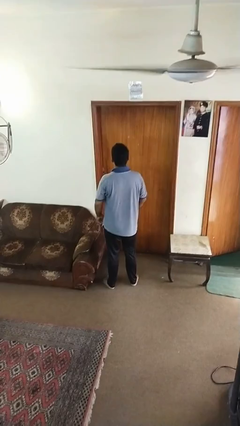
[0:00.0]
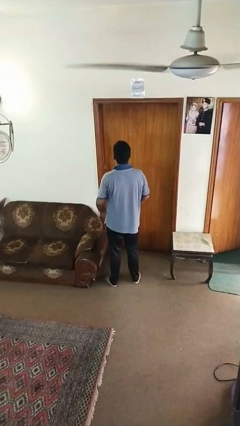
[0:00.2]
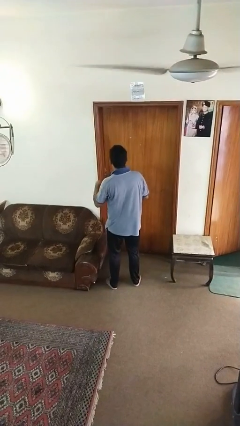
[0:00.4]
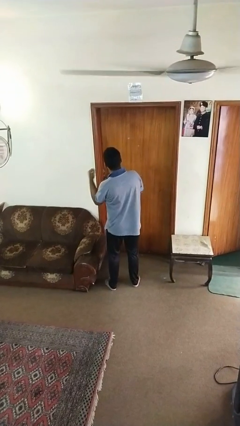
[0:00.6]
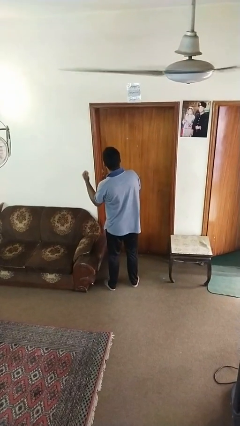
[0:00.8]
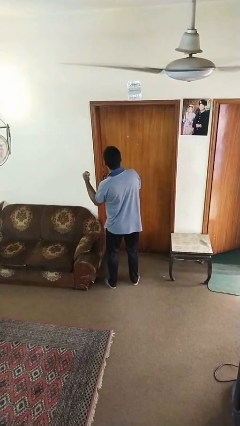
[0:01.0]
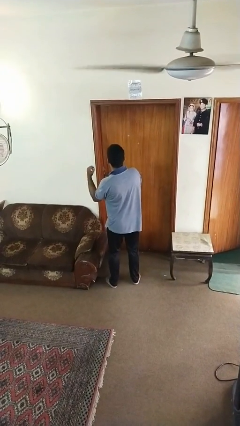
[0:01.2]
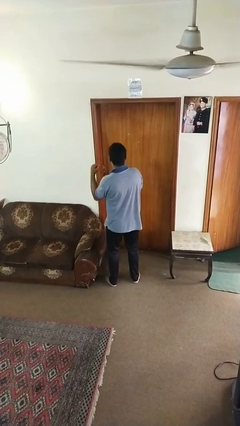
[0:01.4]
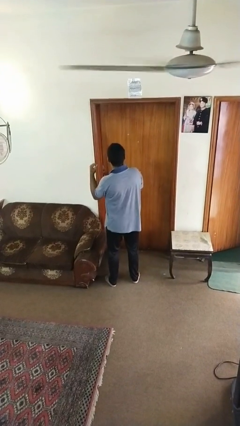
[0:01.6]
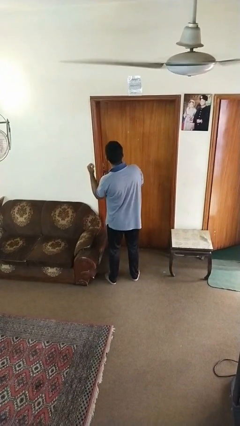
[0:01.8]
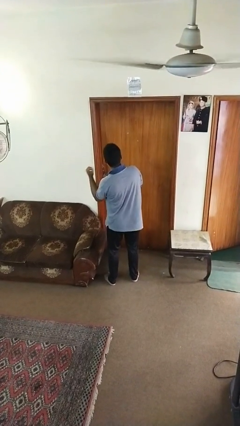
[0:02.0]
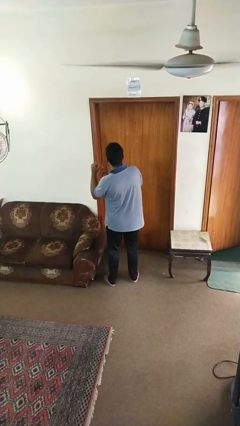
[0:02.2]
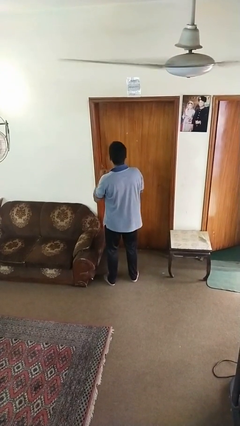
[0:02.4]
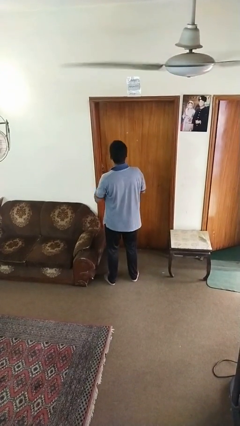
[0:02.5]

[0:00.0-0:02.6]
person dances in place

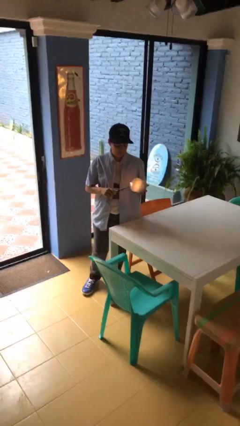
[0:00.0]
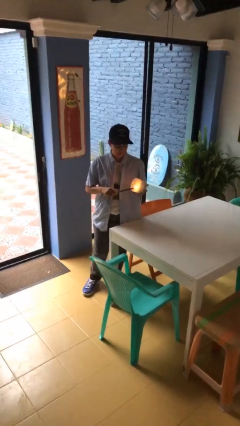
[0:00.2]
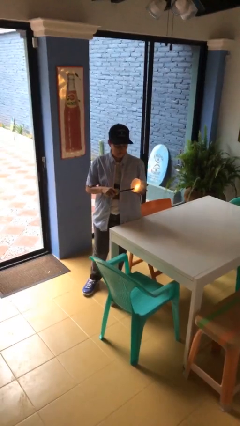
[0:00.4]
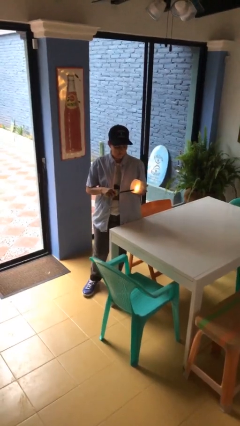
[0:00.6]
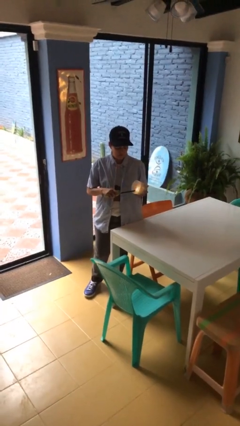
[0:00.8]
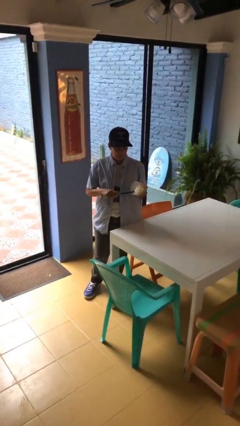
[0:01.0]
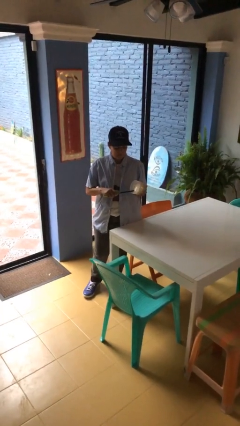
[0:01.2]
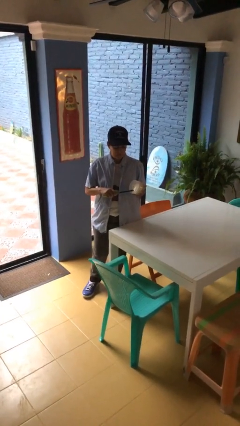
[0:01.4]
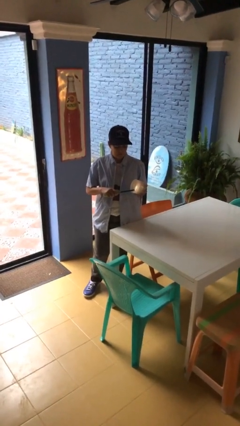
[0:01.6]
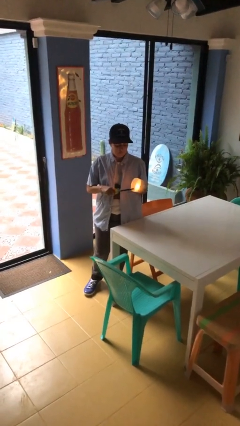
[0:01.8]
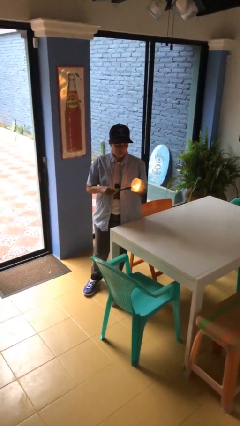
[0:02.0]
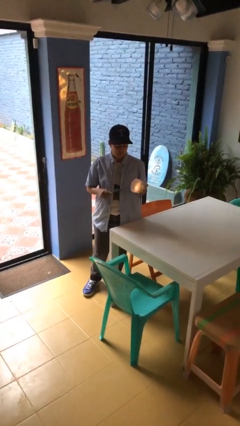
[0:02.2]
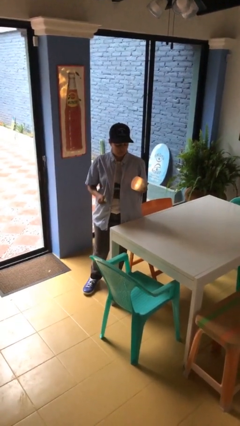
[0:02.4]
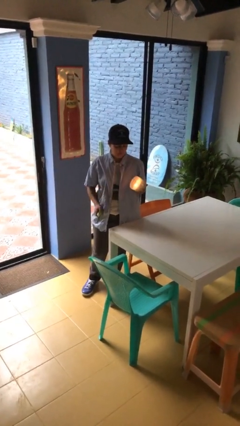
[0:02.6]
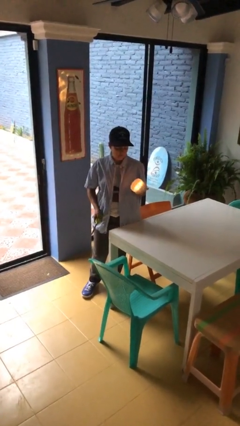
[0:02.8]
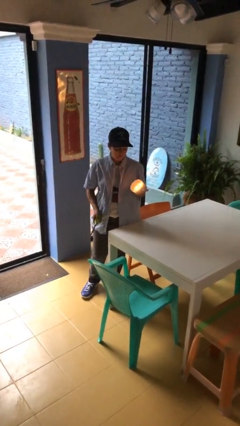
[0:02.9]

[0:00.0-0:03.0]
person lights candle

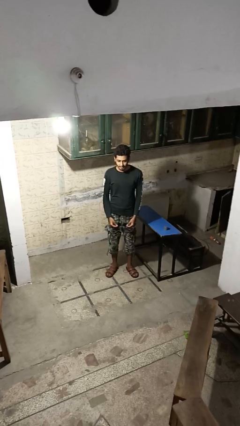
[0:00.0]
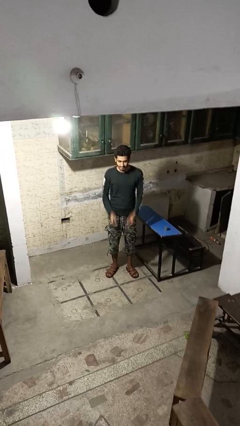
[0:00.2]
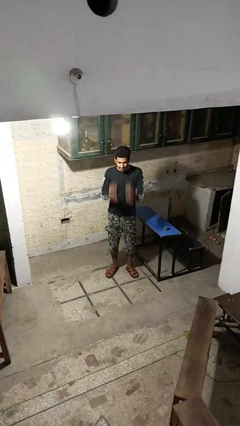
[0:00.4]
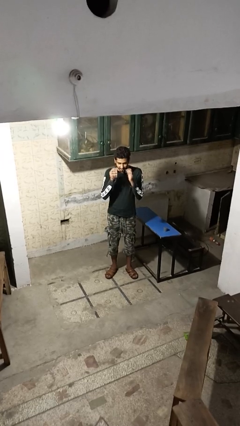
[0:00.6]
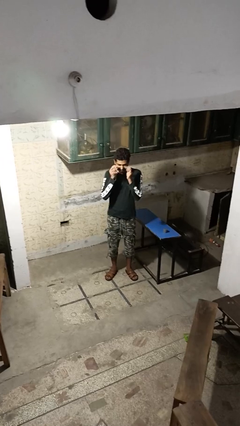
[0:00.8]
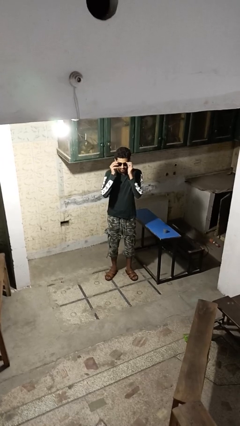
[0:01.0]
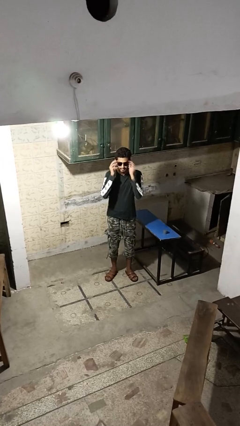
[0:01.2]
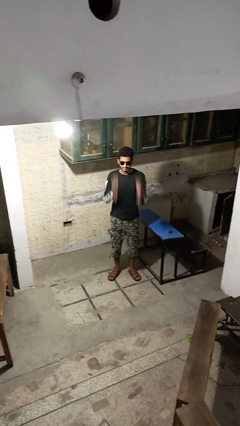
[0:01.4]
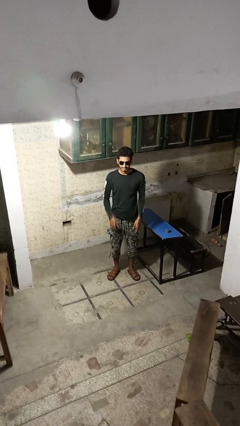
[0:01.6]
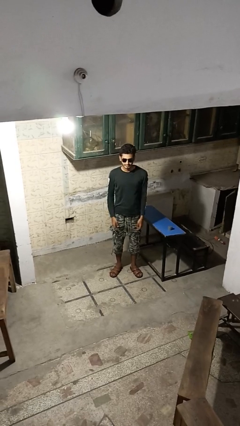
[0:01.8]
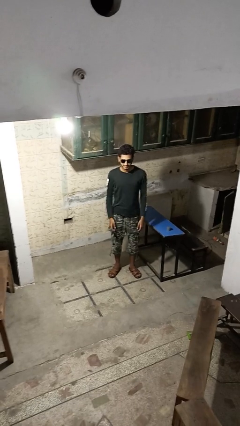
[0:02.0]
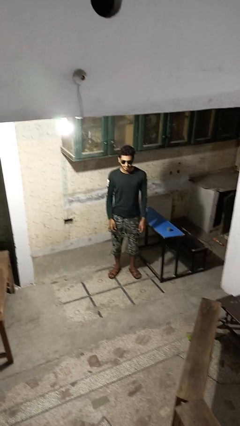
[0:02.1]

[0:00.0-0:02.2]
person puts on sunglasses

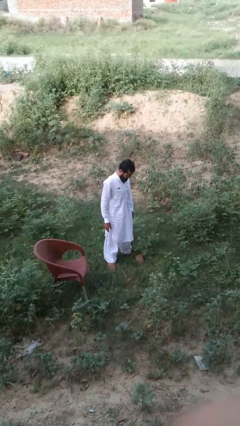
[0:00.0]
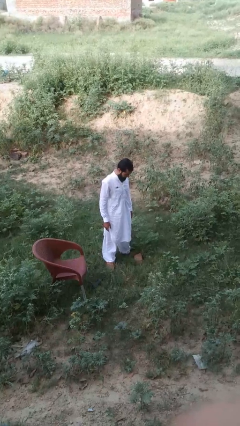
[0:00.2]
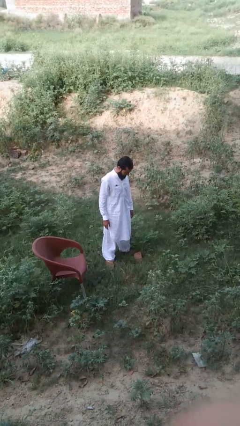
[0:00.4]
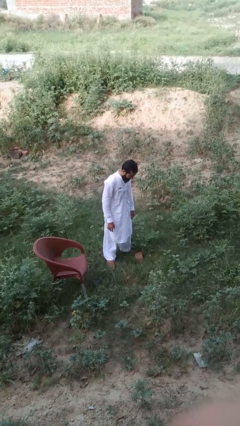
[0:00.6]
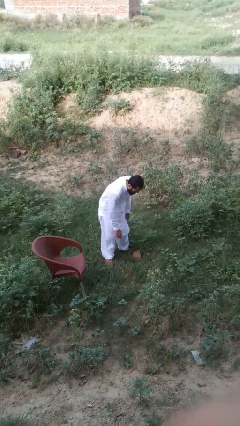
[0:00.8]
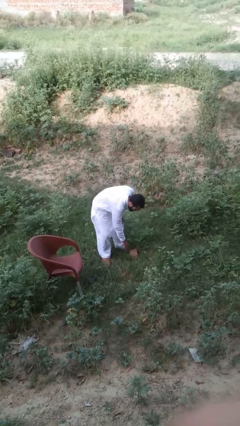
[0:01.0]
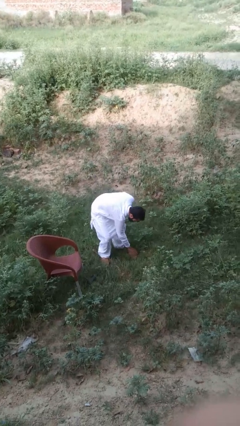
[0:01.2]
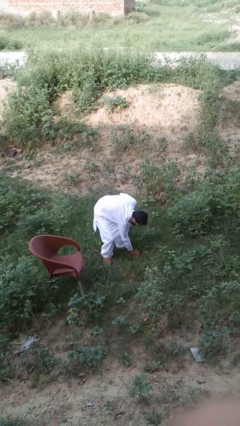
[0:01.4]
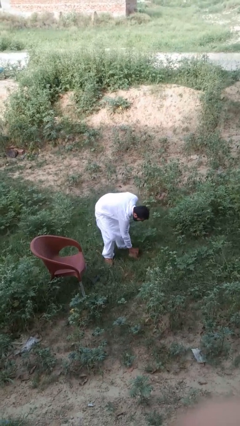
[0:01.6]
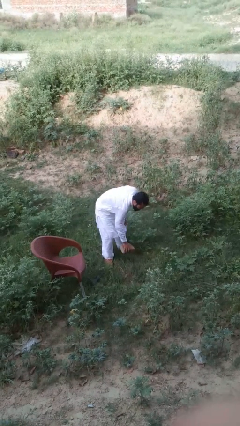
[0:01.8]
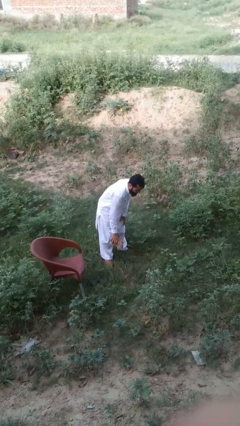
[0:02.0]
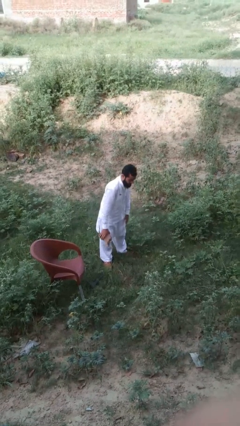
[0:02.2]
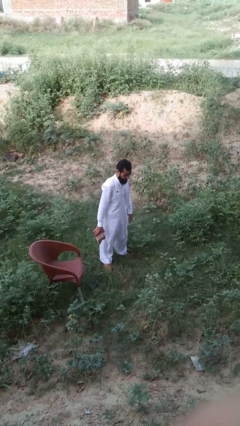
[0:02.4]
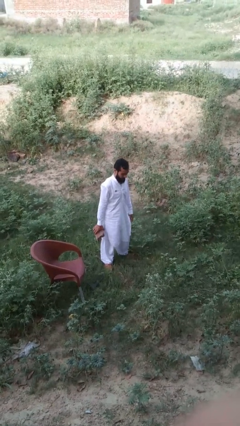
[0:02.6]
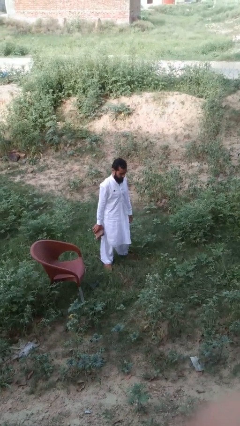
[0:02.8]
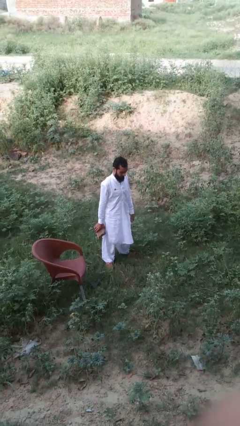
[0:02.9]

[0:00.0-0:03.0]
person picks up object from floor

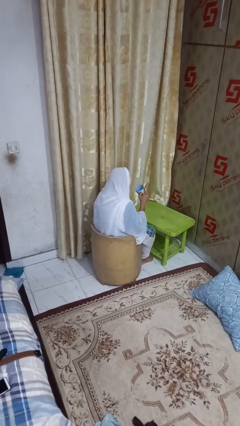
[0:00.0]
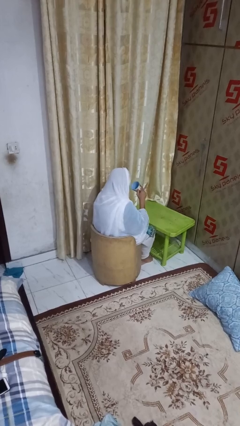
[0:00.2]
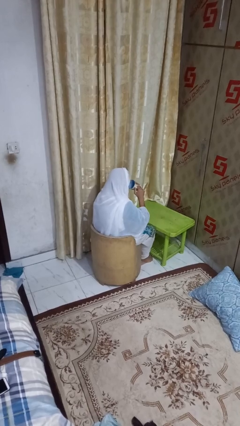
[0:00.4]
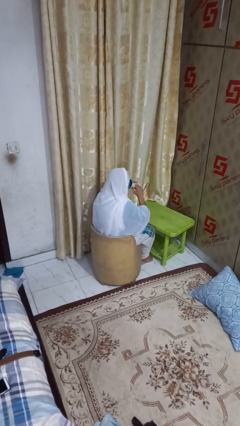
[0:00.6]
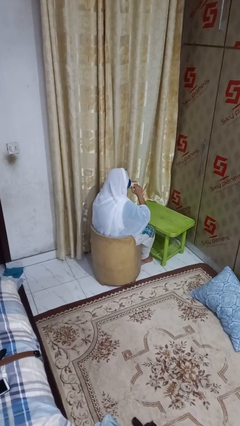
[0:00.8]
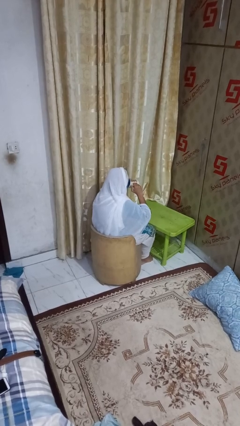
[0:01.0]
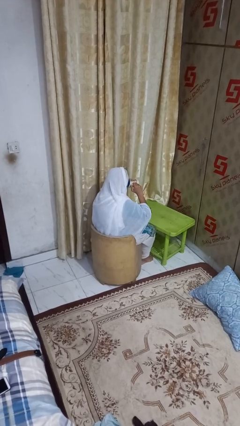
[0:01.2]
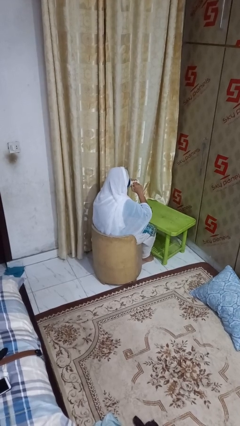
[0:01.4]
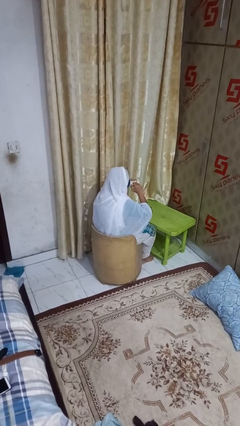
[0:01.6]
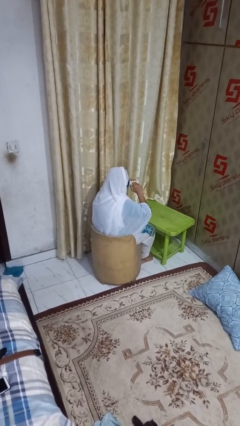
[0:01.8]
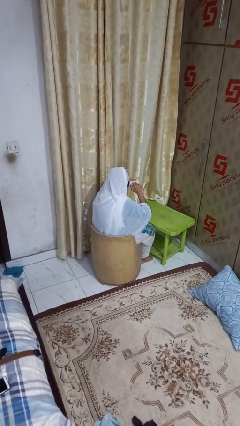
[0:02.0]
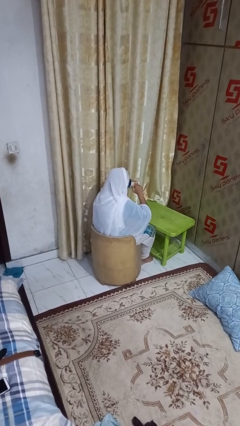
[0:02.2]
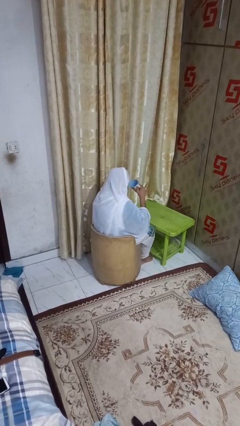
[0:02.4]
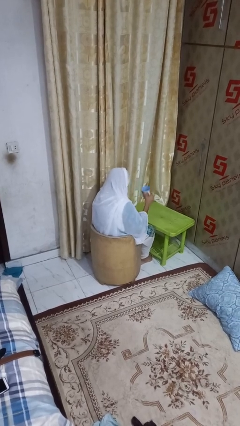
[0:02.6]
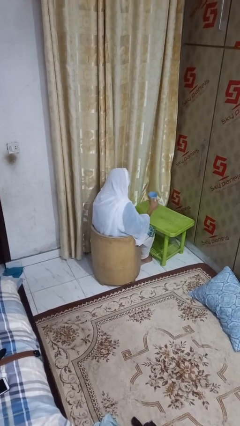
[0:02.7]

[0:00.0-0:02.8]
person drinks from mug

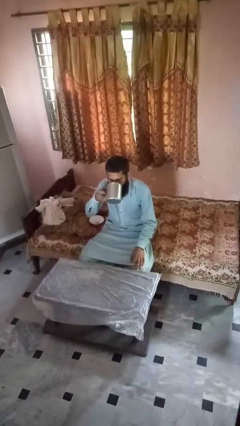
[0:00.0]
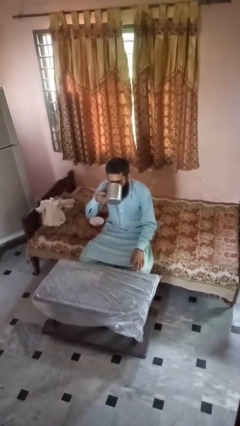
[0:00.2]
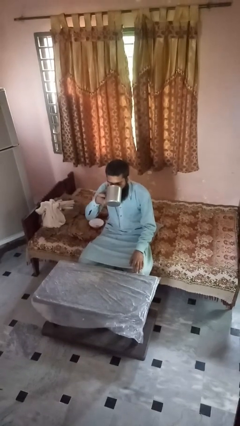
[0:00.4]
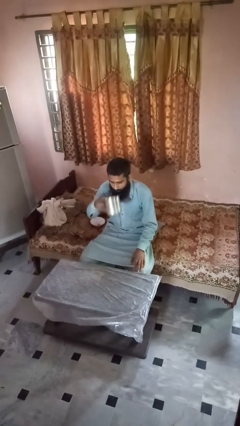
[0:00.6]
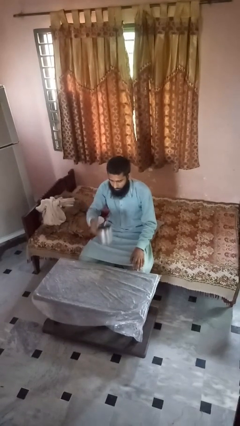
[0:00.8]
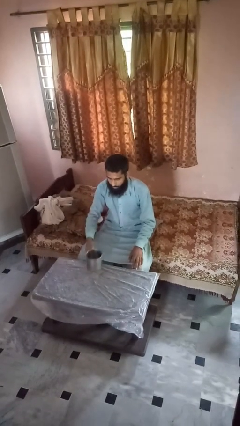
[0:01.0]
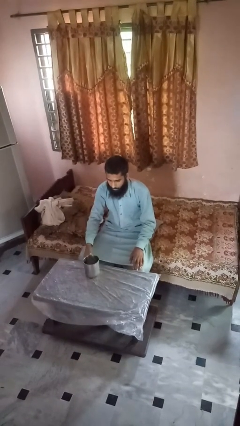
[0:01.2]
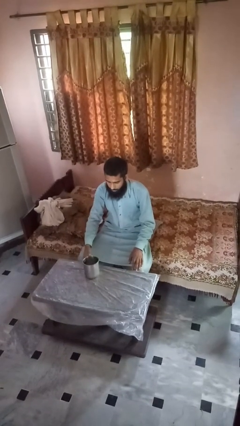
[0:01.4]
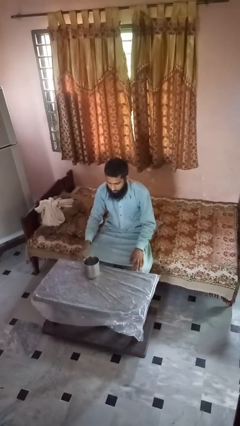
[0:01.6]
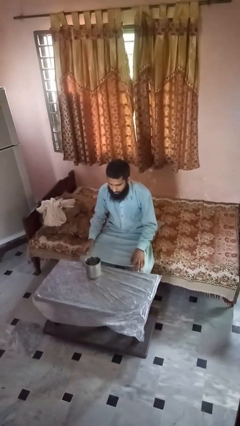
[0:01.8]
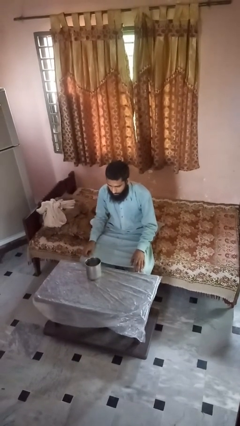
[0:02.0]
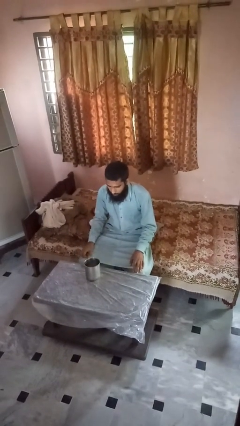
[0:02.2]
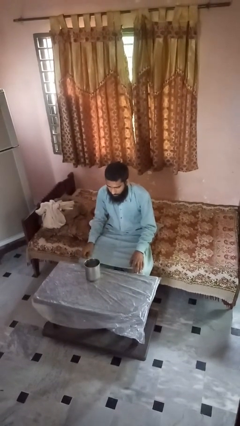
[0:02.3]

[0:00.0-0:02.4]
person puts down object on table

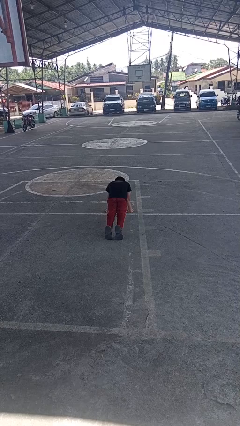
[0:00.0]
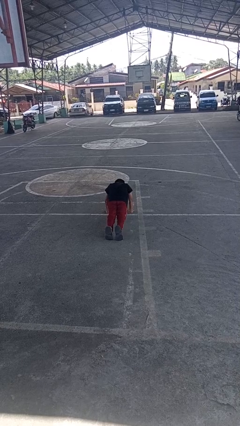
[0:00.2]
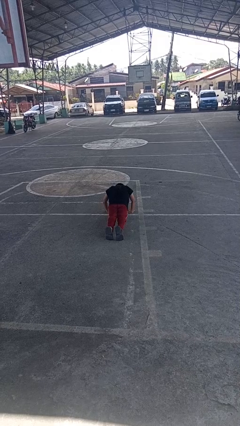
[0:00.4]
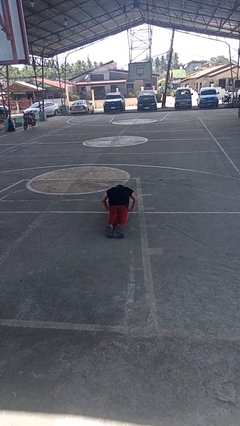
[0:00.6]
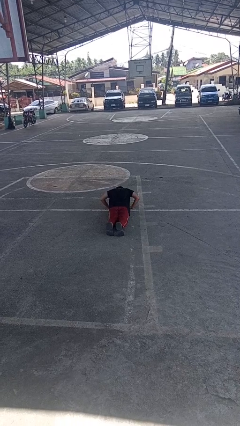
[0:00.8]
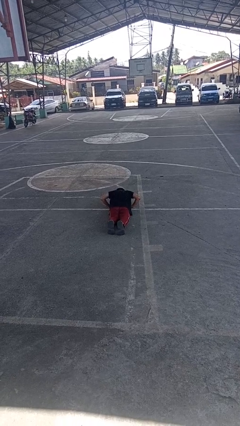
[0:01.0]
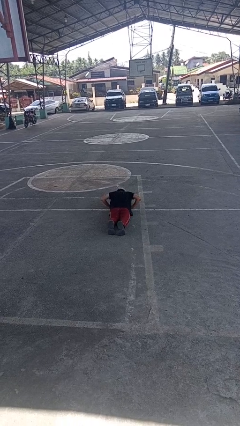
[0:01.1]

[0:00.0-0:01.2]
person exercises with pushup
